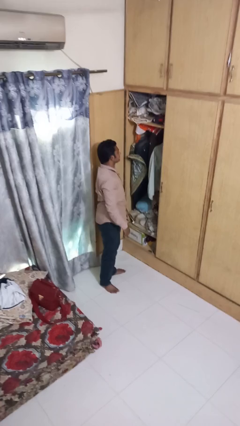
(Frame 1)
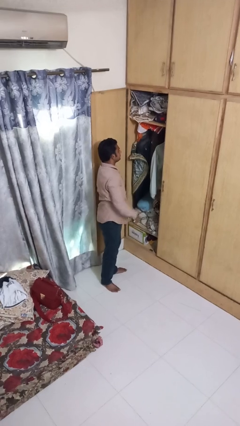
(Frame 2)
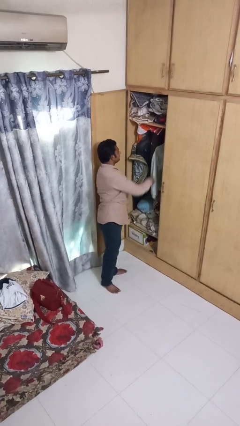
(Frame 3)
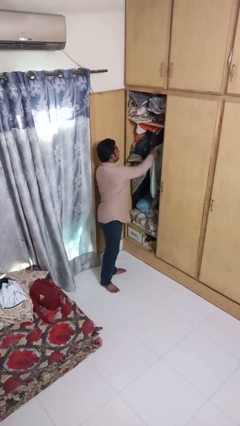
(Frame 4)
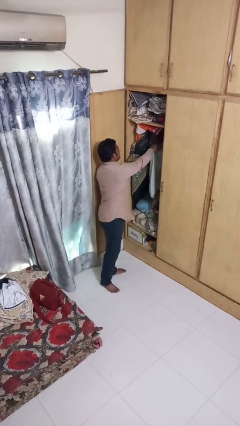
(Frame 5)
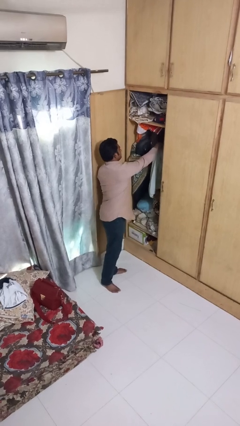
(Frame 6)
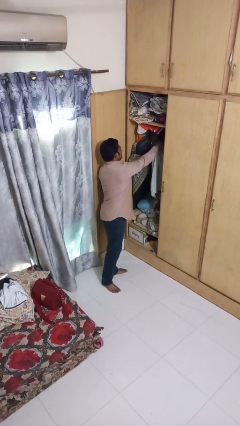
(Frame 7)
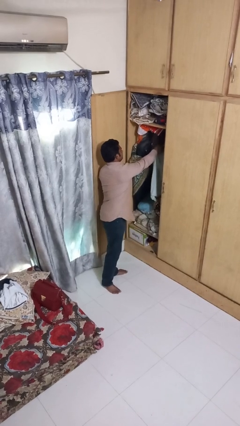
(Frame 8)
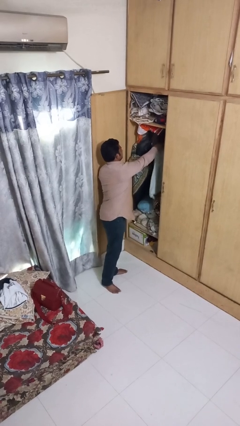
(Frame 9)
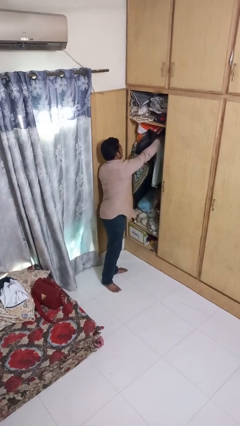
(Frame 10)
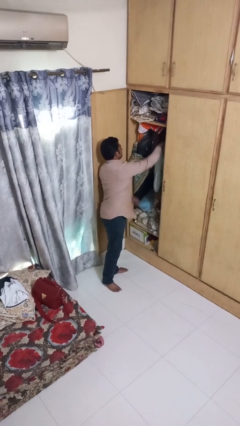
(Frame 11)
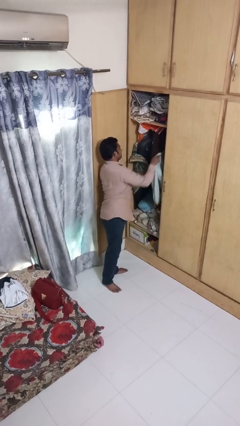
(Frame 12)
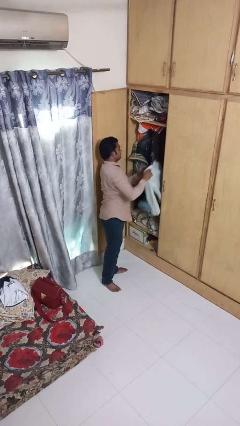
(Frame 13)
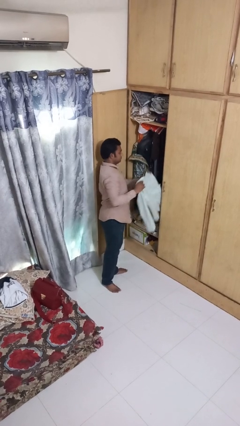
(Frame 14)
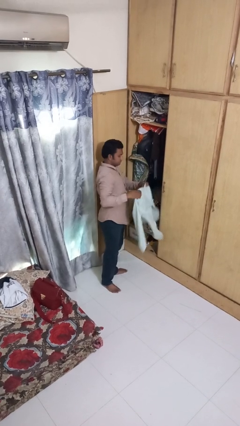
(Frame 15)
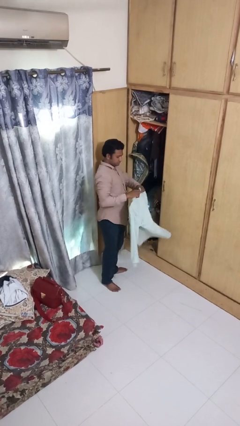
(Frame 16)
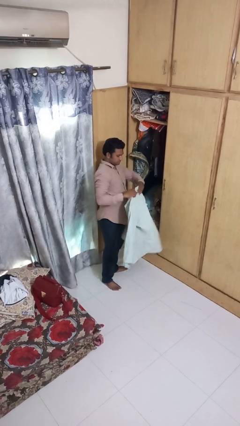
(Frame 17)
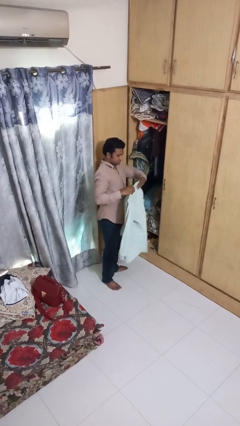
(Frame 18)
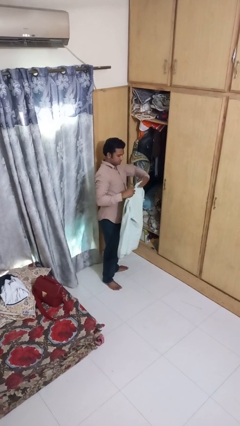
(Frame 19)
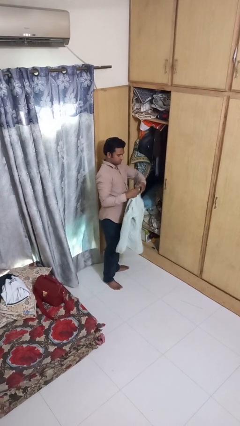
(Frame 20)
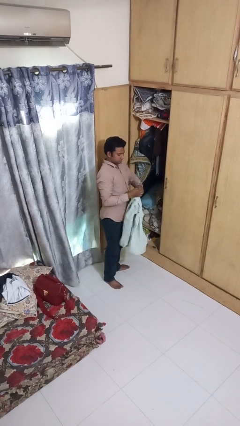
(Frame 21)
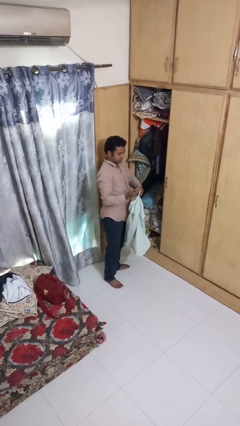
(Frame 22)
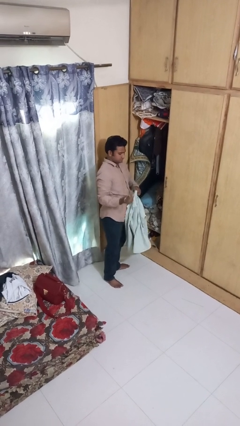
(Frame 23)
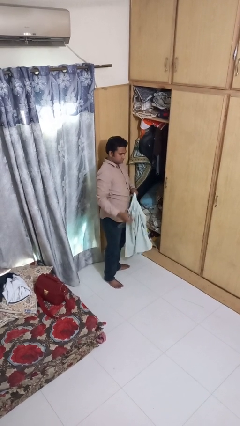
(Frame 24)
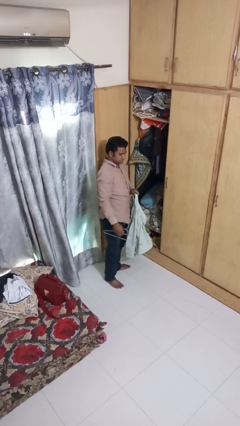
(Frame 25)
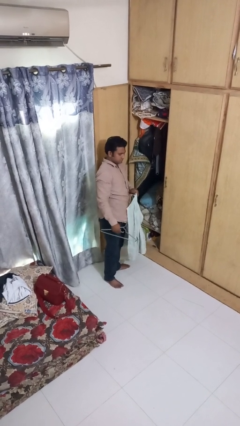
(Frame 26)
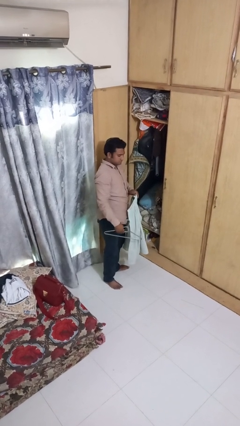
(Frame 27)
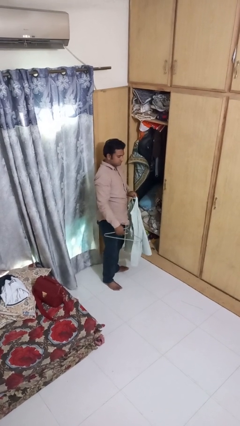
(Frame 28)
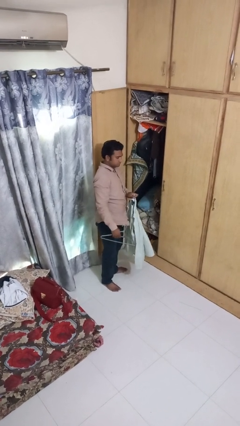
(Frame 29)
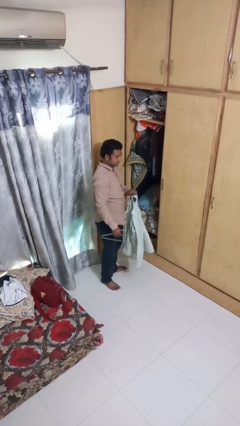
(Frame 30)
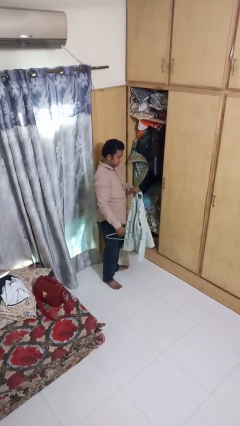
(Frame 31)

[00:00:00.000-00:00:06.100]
person takes clothes from closet

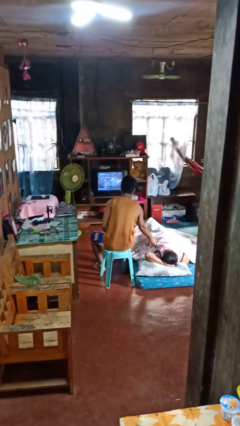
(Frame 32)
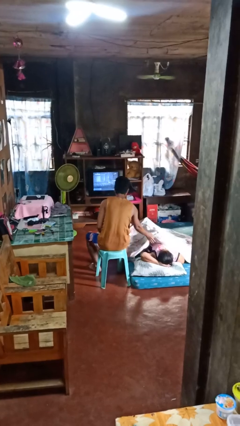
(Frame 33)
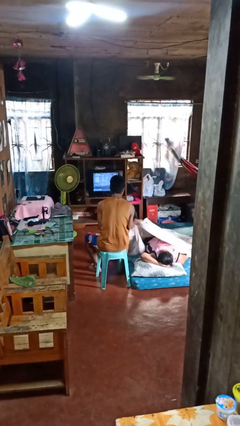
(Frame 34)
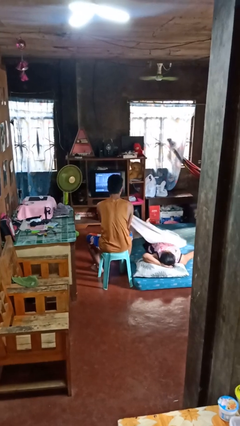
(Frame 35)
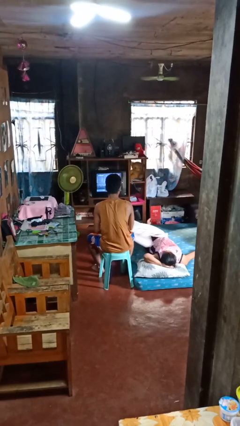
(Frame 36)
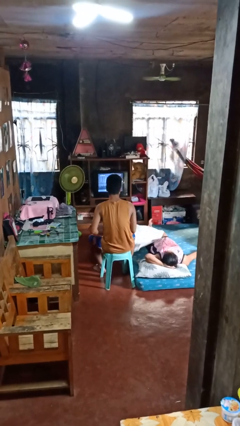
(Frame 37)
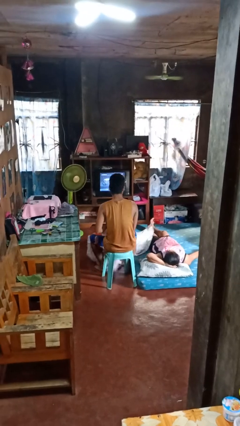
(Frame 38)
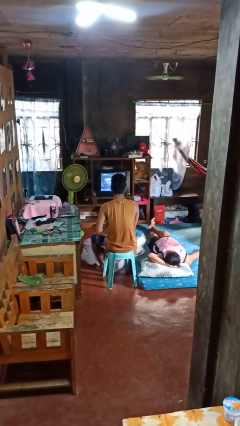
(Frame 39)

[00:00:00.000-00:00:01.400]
person uncovers friend with blanket

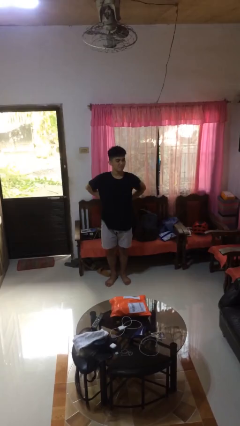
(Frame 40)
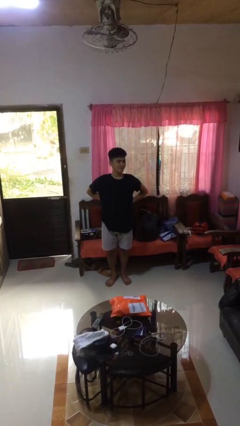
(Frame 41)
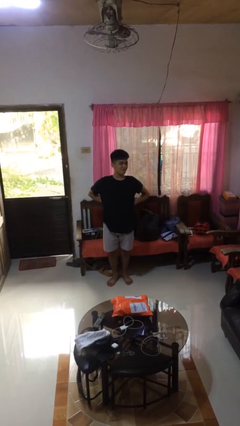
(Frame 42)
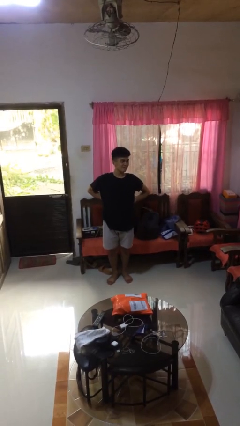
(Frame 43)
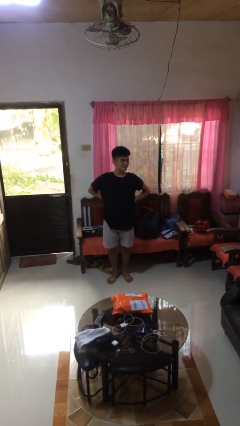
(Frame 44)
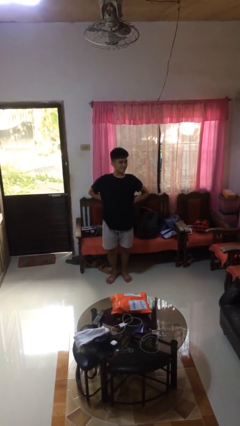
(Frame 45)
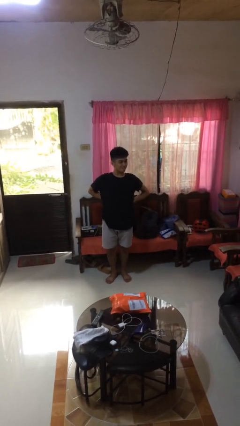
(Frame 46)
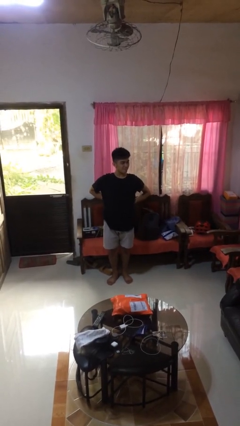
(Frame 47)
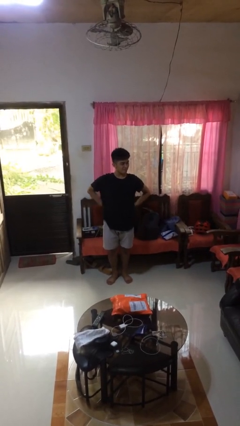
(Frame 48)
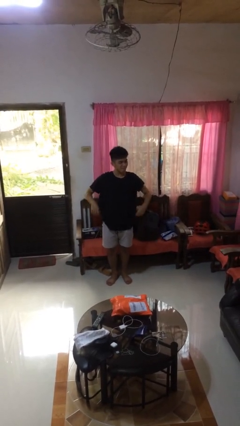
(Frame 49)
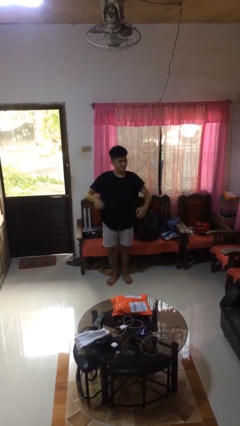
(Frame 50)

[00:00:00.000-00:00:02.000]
person stretches back

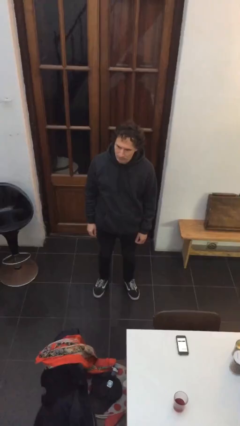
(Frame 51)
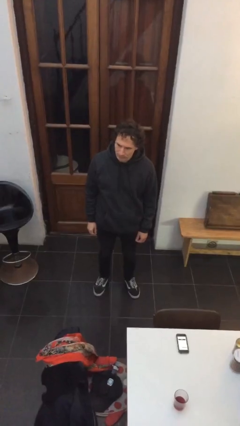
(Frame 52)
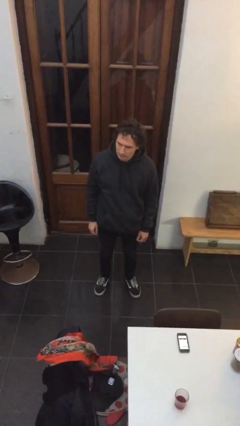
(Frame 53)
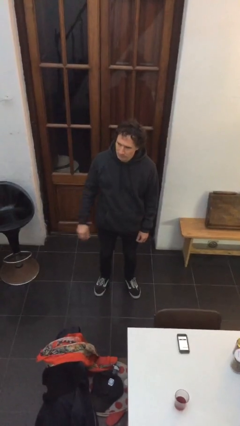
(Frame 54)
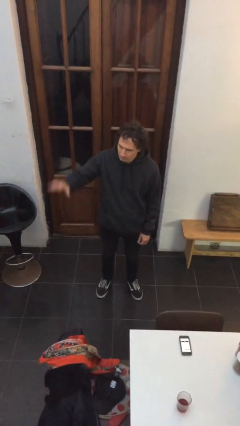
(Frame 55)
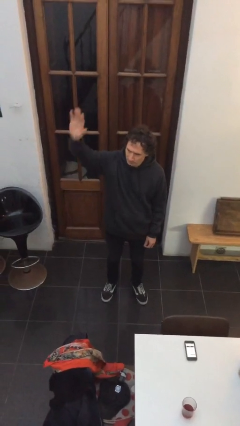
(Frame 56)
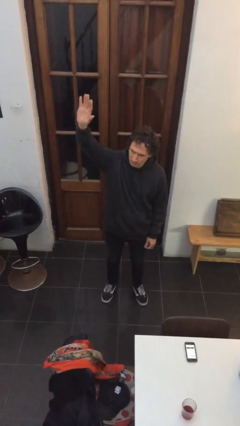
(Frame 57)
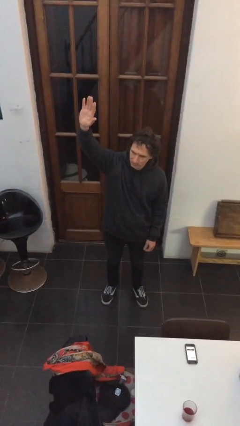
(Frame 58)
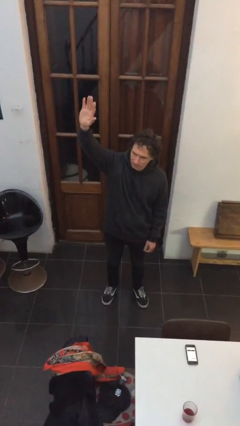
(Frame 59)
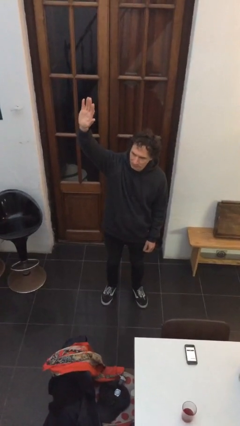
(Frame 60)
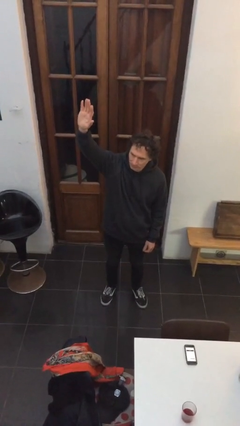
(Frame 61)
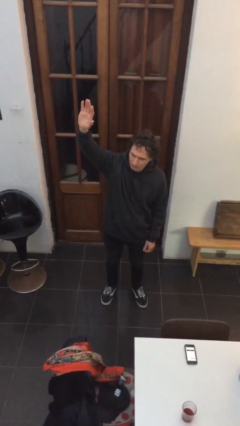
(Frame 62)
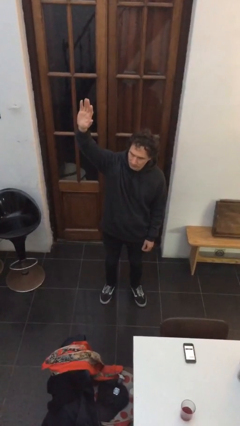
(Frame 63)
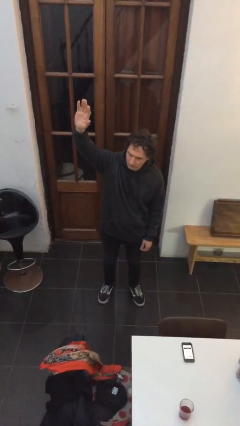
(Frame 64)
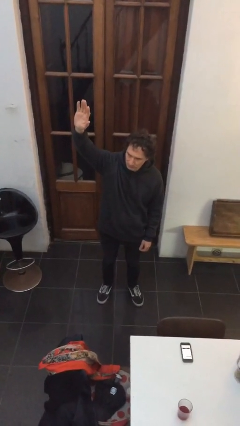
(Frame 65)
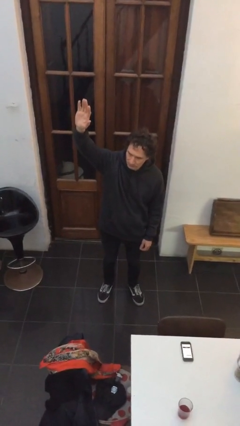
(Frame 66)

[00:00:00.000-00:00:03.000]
person gestures raise hand

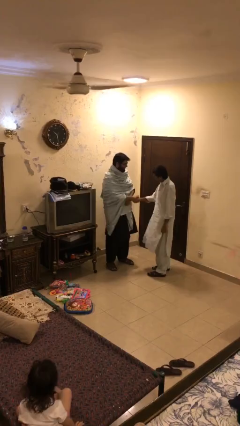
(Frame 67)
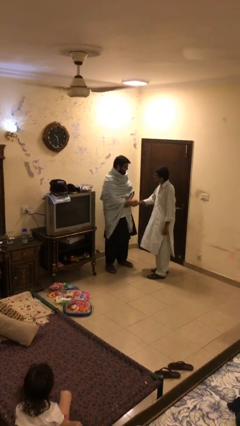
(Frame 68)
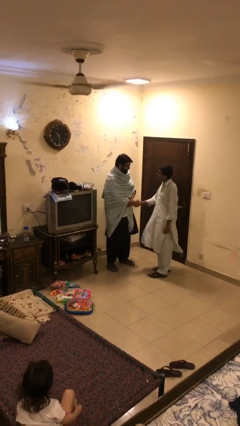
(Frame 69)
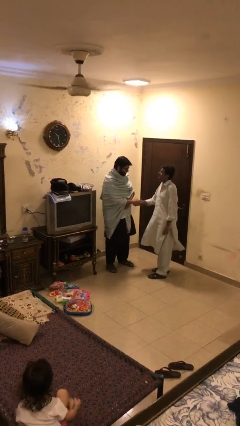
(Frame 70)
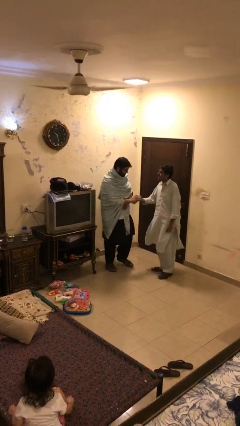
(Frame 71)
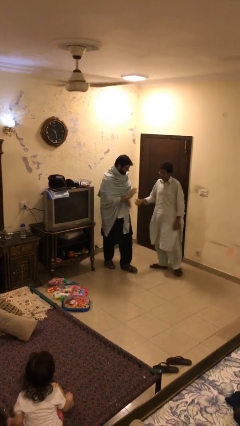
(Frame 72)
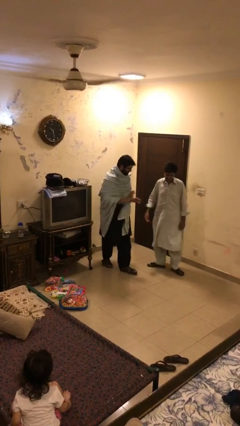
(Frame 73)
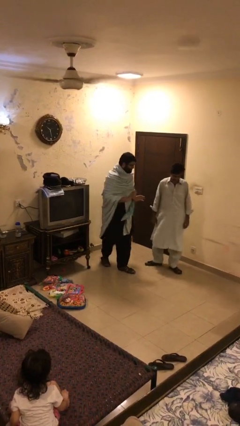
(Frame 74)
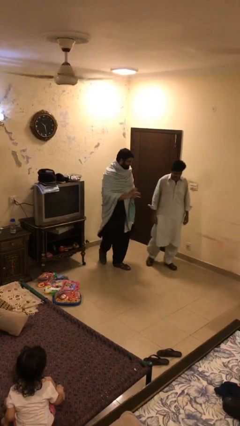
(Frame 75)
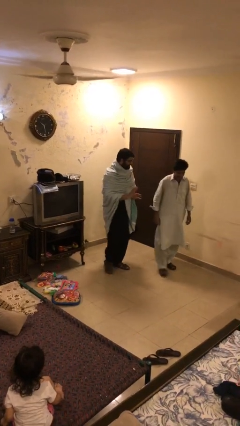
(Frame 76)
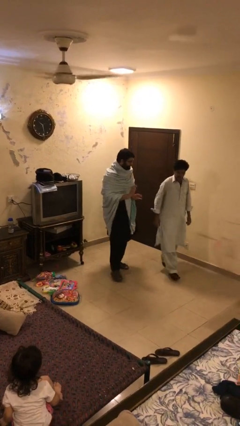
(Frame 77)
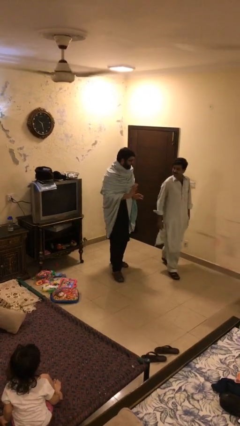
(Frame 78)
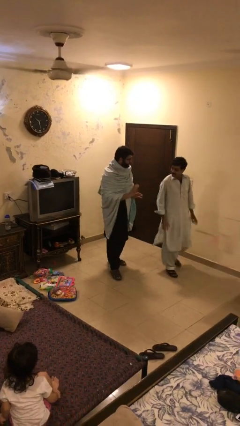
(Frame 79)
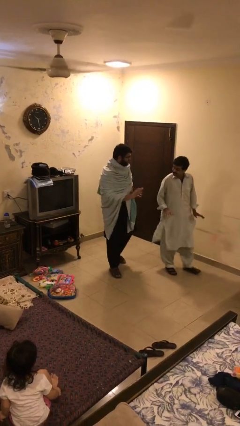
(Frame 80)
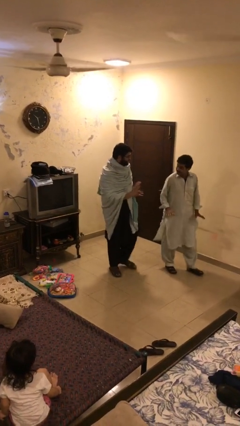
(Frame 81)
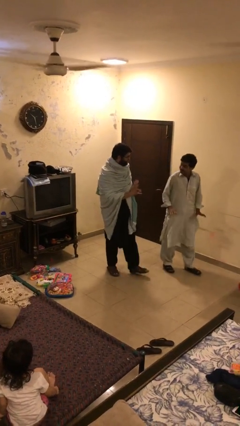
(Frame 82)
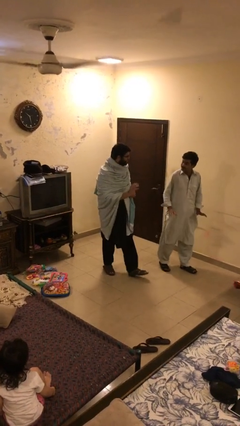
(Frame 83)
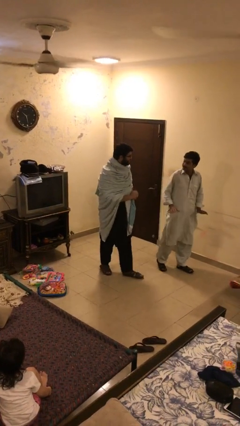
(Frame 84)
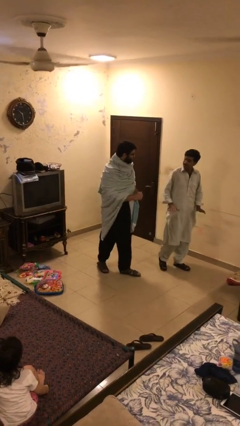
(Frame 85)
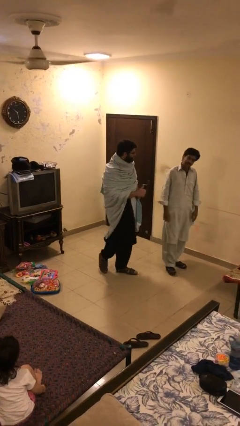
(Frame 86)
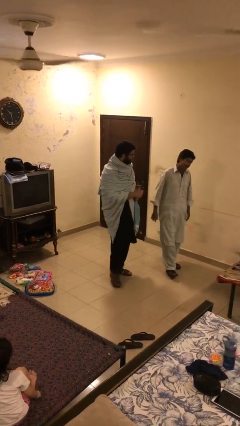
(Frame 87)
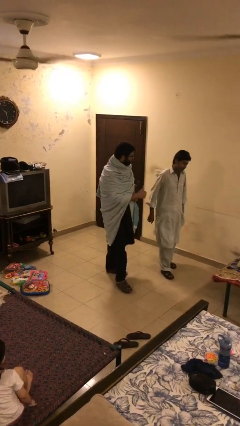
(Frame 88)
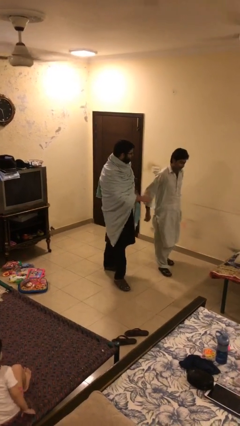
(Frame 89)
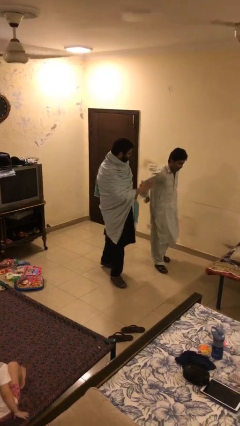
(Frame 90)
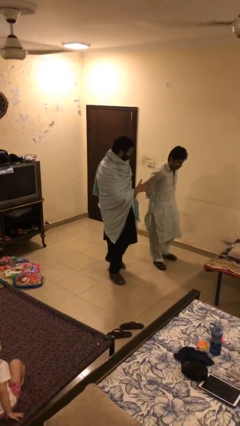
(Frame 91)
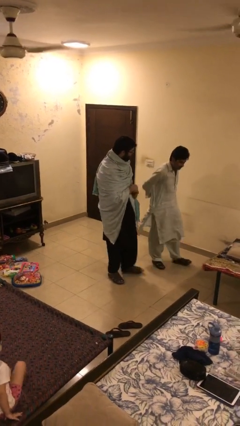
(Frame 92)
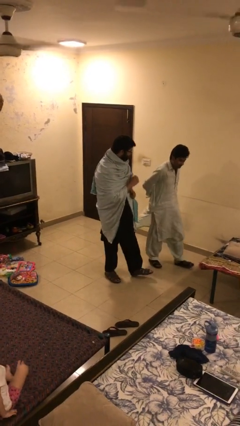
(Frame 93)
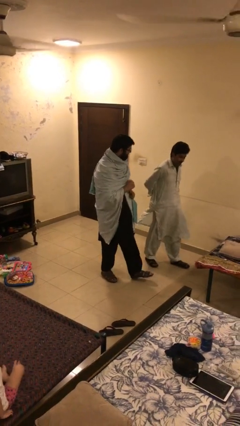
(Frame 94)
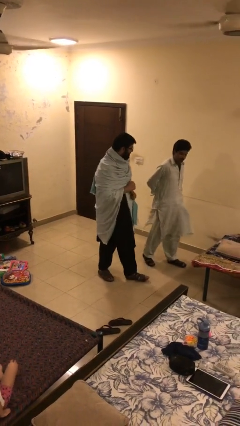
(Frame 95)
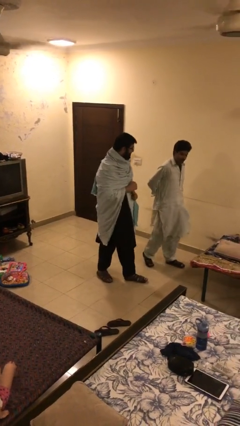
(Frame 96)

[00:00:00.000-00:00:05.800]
person talks to person
